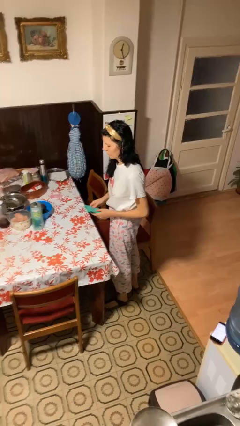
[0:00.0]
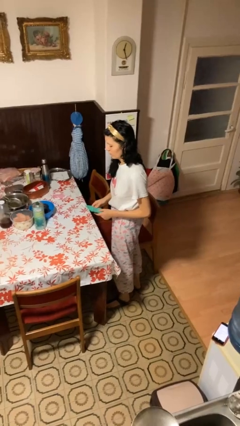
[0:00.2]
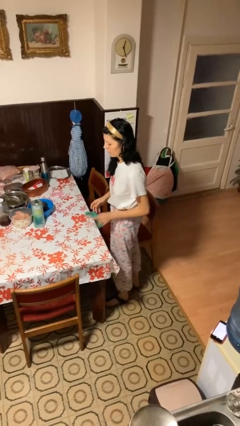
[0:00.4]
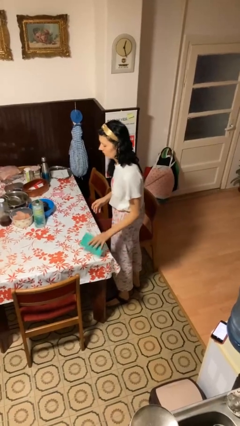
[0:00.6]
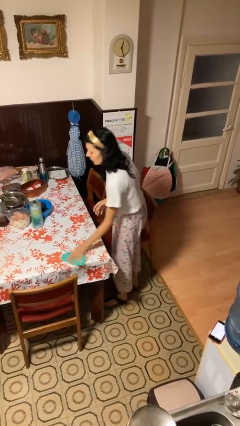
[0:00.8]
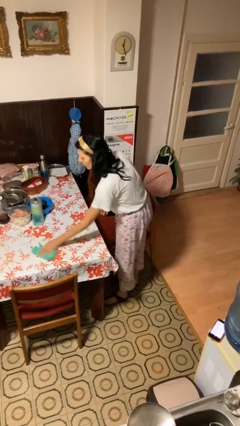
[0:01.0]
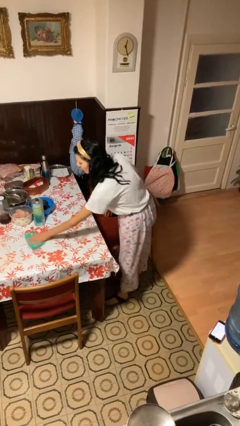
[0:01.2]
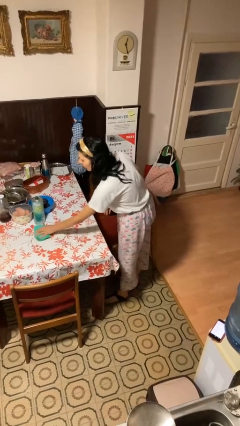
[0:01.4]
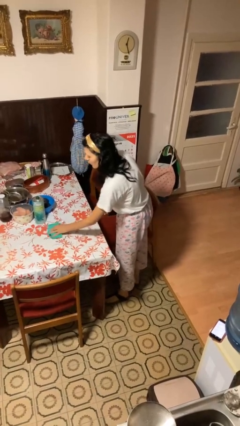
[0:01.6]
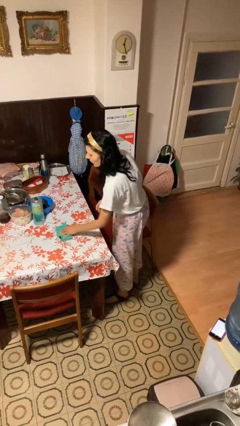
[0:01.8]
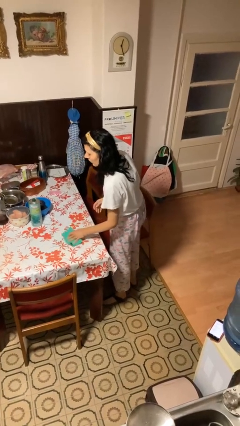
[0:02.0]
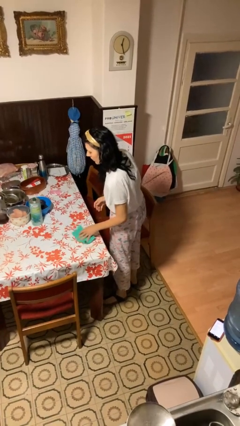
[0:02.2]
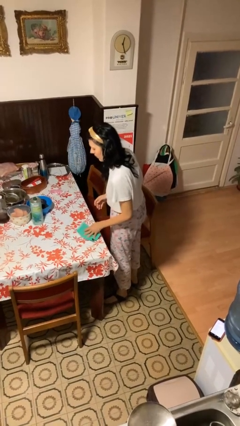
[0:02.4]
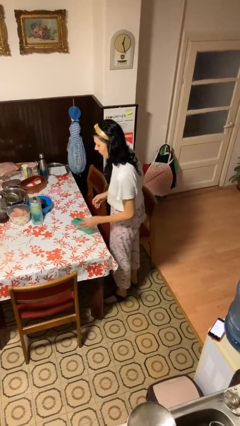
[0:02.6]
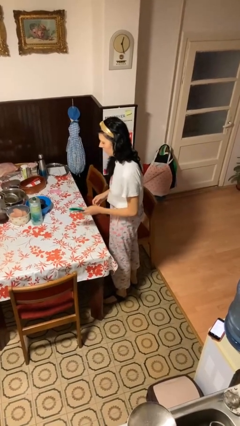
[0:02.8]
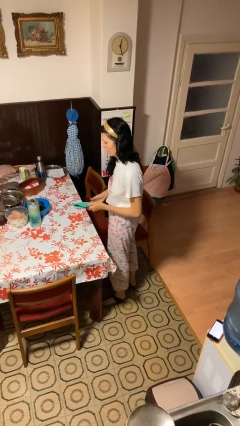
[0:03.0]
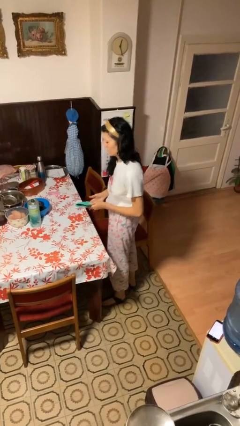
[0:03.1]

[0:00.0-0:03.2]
person cleans table with rag

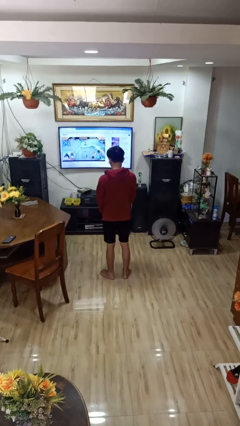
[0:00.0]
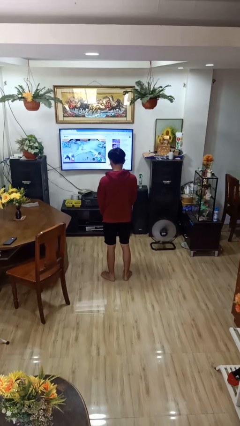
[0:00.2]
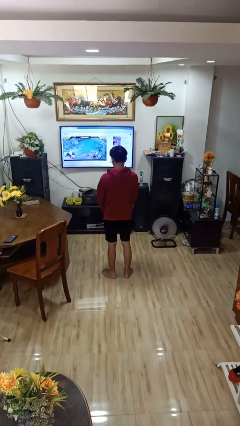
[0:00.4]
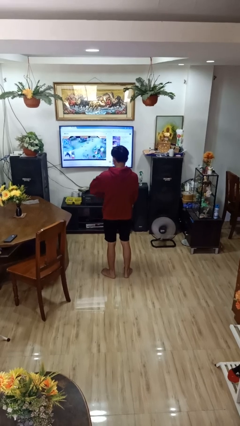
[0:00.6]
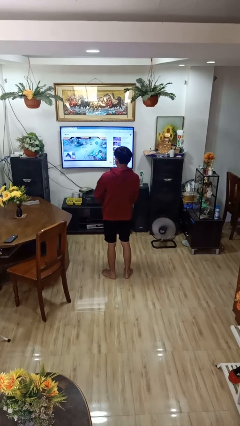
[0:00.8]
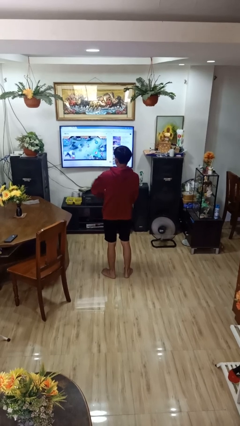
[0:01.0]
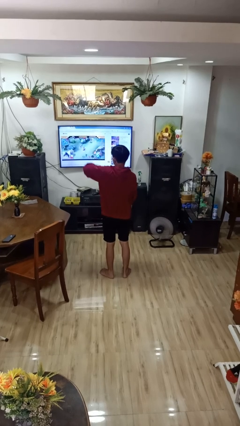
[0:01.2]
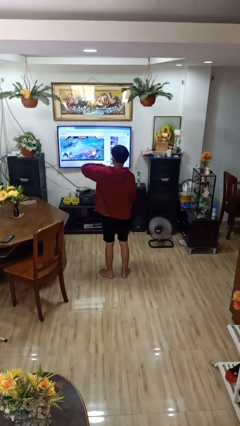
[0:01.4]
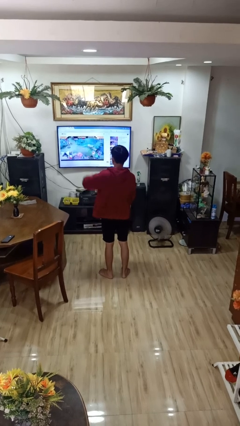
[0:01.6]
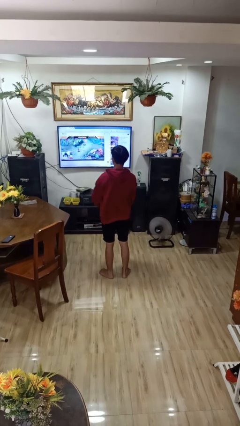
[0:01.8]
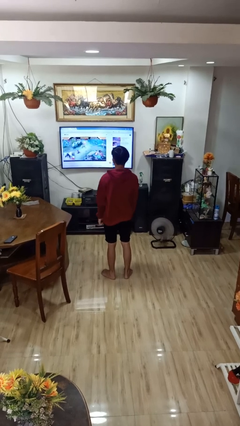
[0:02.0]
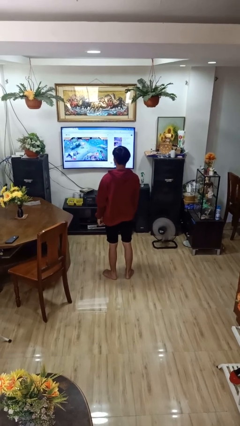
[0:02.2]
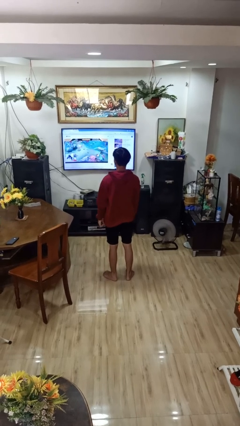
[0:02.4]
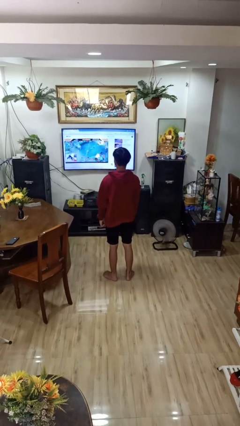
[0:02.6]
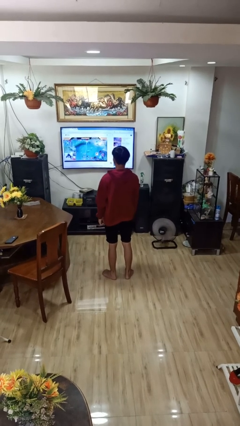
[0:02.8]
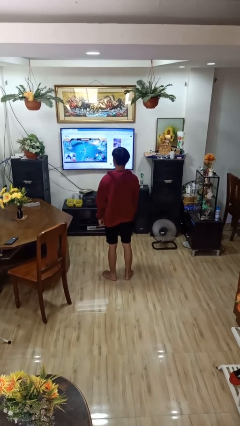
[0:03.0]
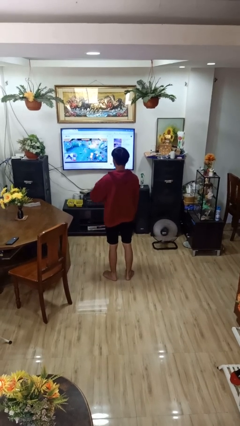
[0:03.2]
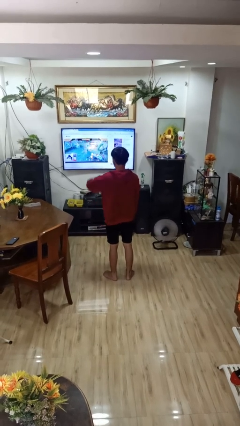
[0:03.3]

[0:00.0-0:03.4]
person zips up jacket

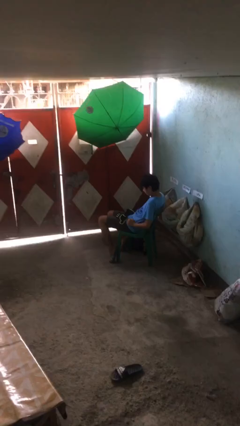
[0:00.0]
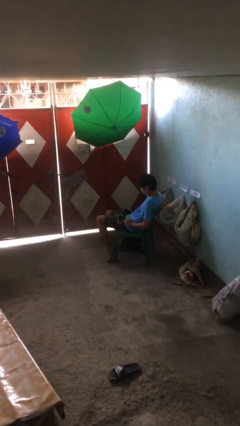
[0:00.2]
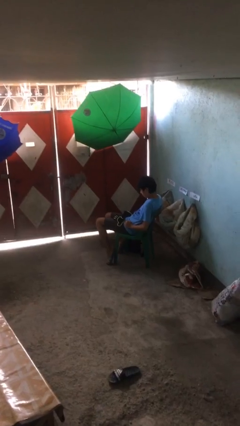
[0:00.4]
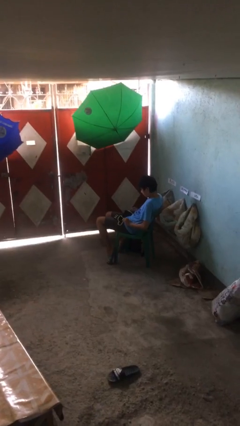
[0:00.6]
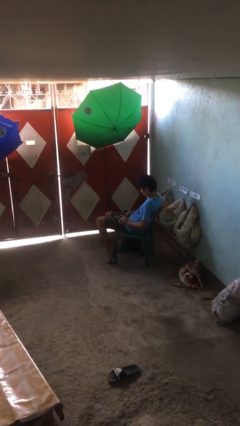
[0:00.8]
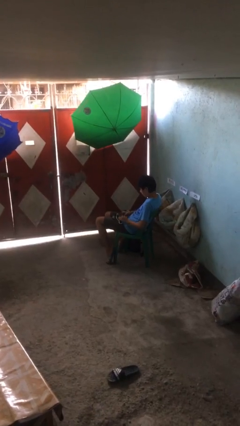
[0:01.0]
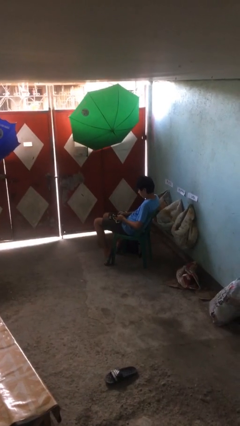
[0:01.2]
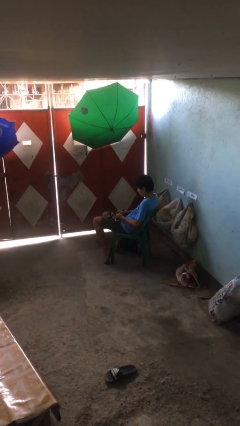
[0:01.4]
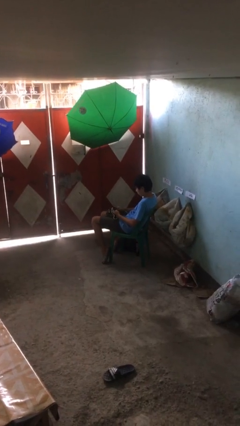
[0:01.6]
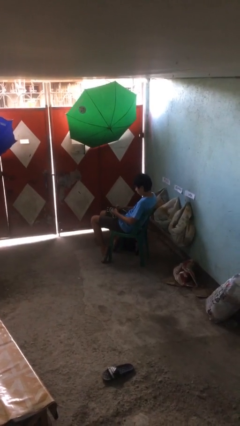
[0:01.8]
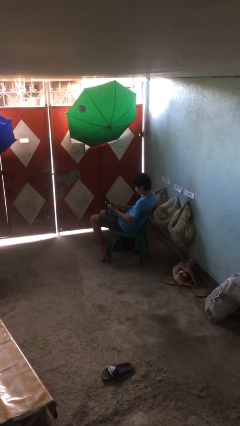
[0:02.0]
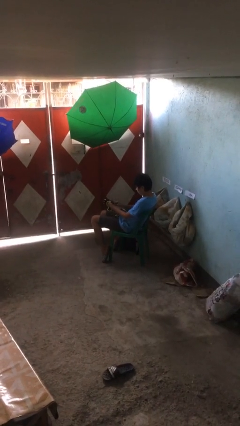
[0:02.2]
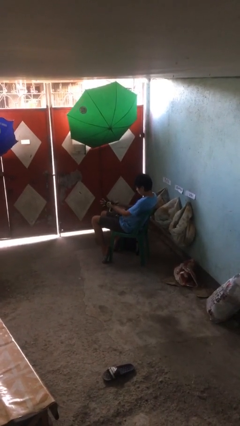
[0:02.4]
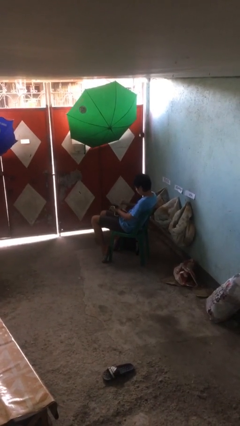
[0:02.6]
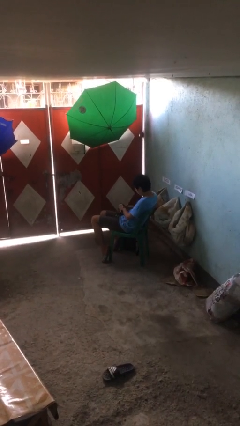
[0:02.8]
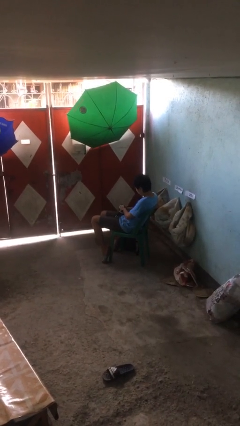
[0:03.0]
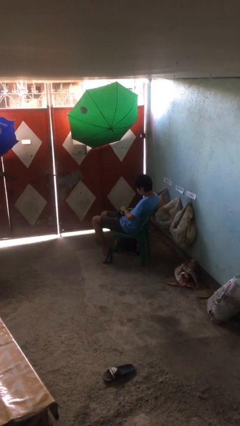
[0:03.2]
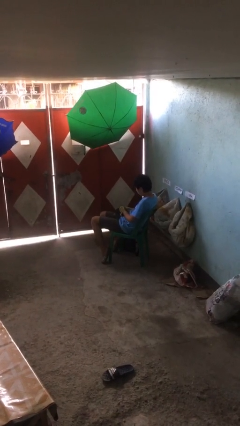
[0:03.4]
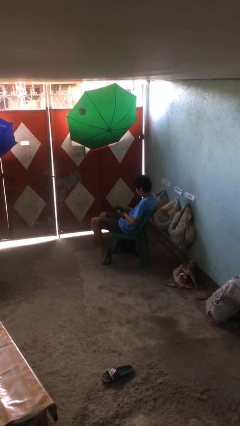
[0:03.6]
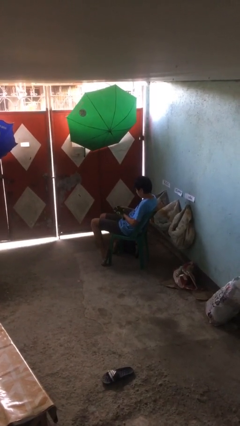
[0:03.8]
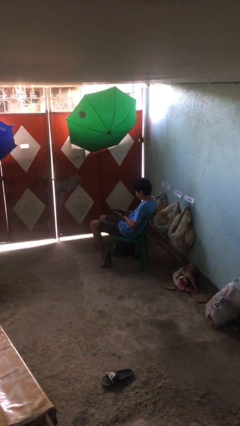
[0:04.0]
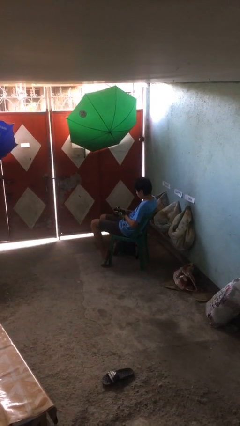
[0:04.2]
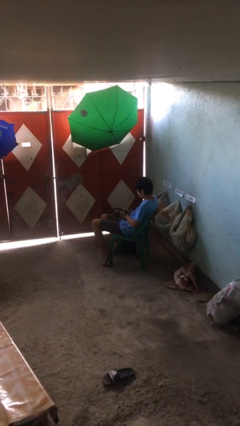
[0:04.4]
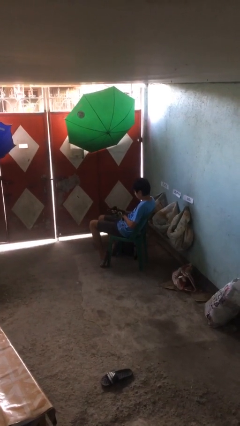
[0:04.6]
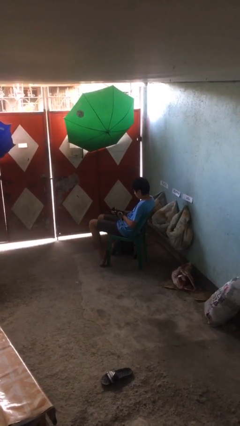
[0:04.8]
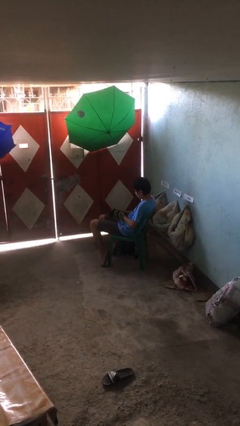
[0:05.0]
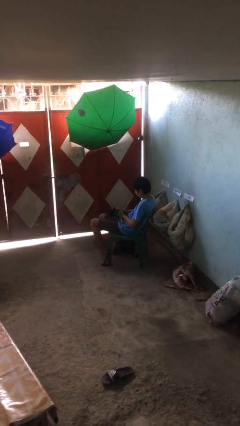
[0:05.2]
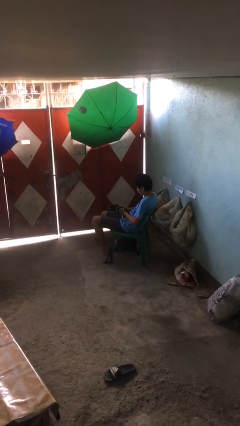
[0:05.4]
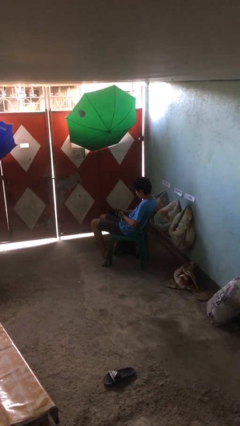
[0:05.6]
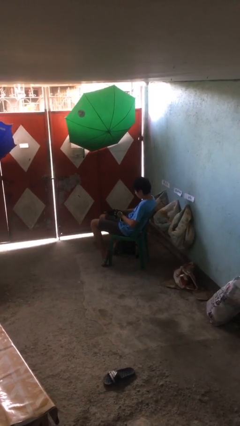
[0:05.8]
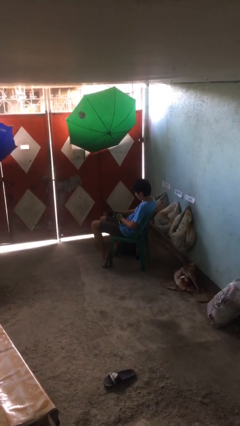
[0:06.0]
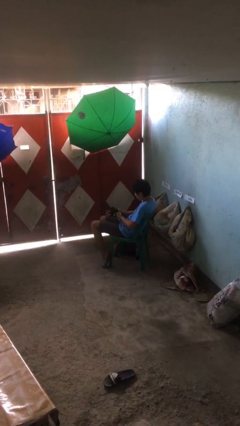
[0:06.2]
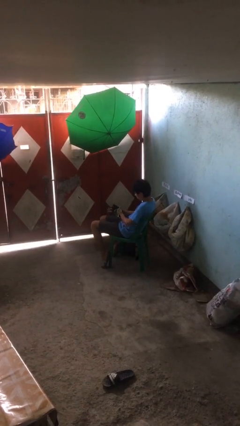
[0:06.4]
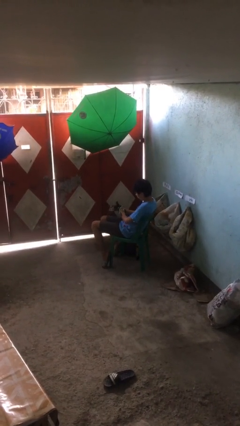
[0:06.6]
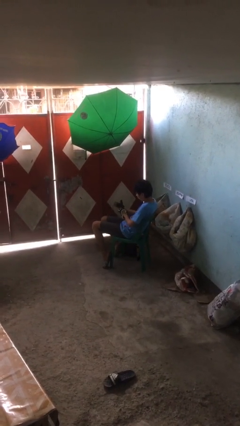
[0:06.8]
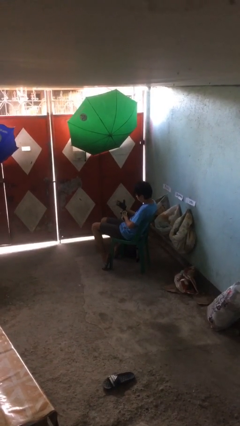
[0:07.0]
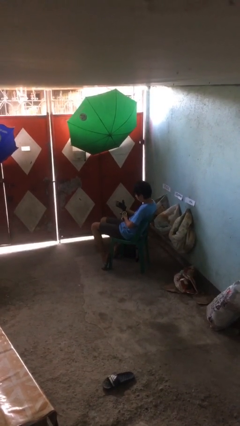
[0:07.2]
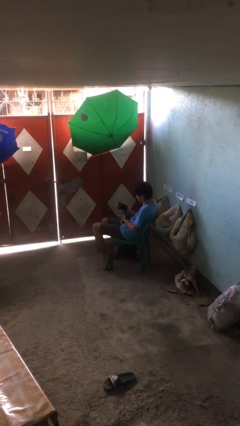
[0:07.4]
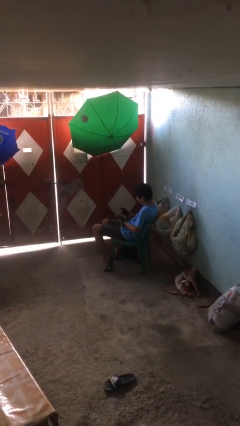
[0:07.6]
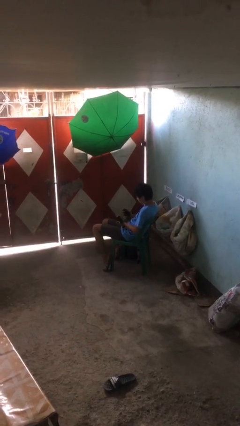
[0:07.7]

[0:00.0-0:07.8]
person puts on gloves

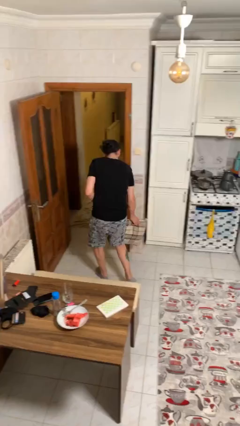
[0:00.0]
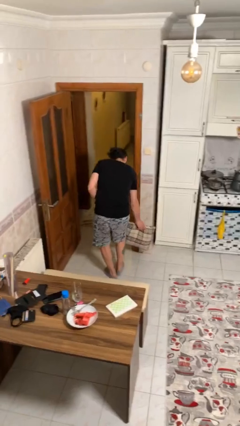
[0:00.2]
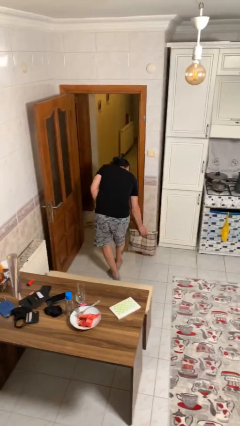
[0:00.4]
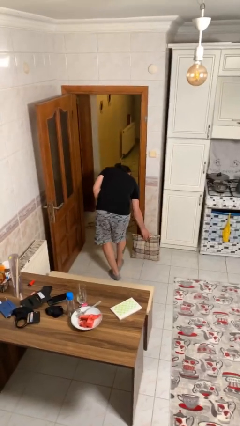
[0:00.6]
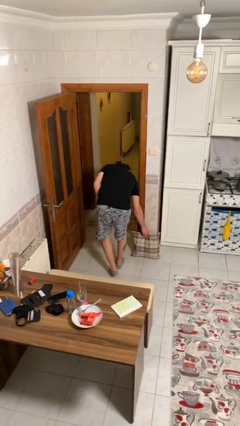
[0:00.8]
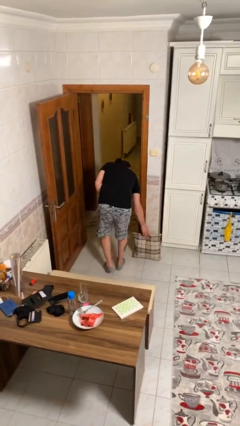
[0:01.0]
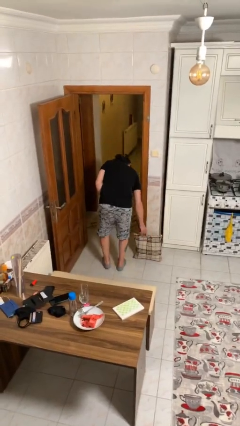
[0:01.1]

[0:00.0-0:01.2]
person puts down object on floor

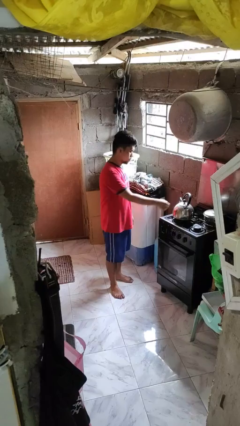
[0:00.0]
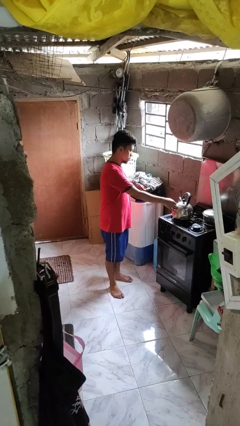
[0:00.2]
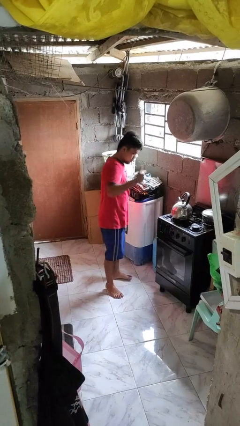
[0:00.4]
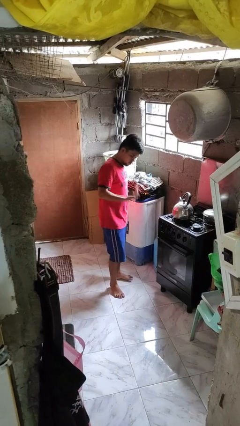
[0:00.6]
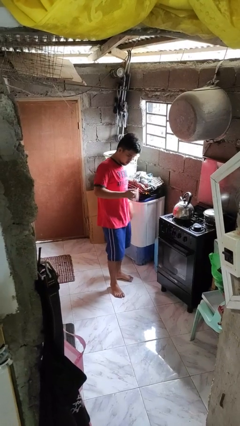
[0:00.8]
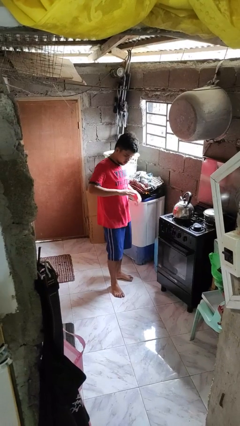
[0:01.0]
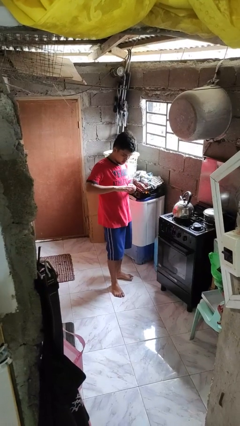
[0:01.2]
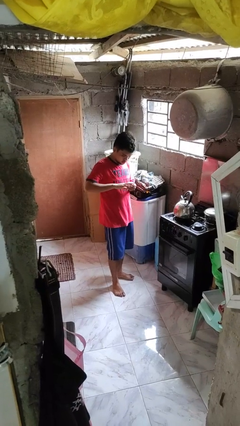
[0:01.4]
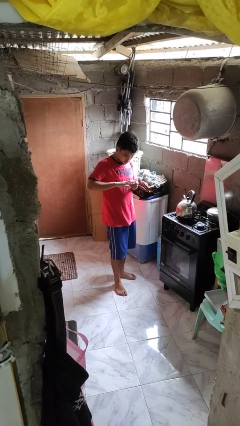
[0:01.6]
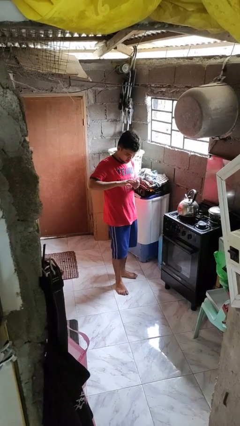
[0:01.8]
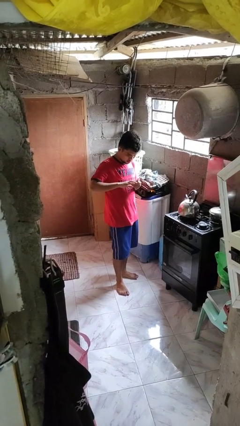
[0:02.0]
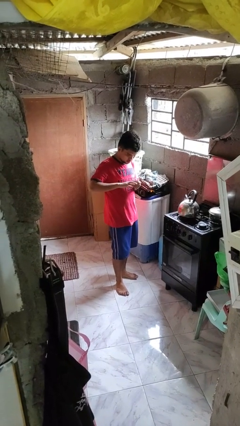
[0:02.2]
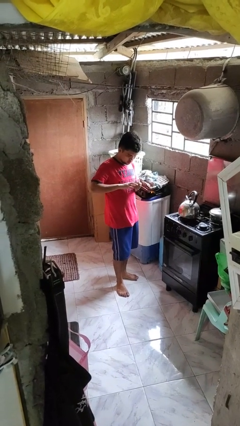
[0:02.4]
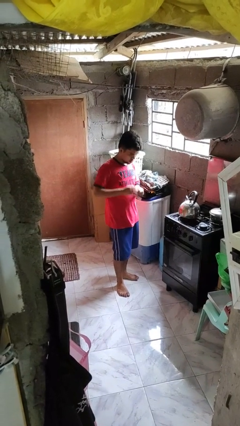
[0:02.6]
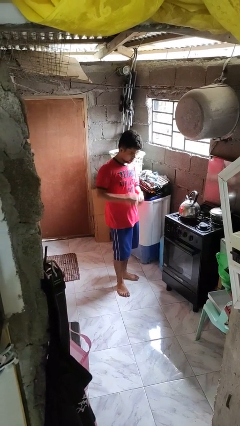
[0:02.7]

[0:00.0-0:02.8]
person burns hand
